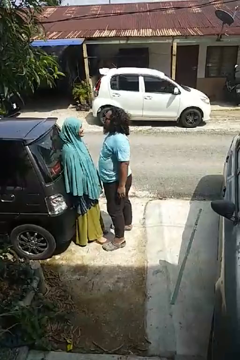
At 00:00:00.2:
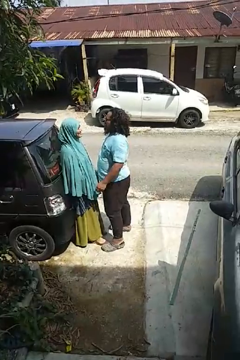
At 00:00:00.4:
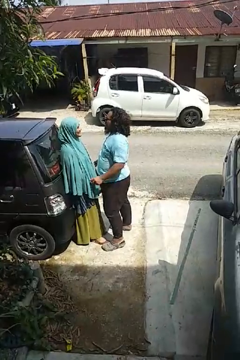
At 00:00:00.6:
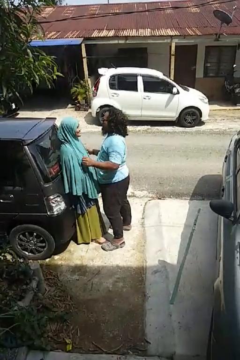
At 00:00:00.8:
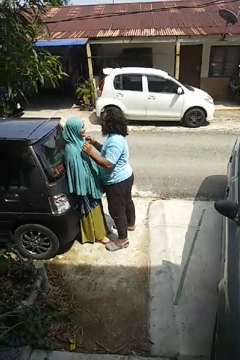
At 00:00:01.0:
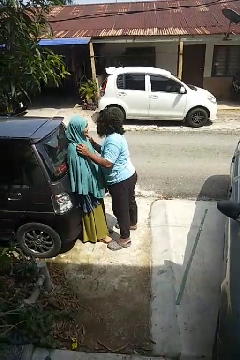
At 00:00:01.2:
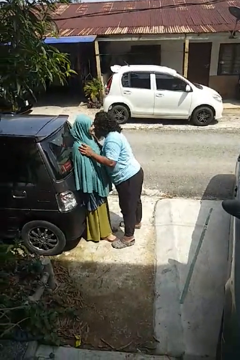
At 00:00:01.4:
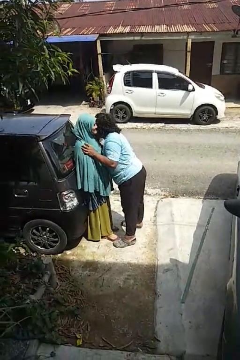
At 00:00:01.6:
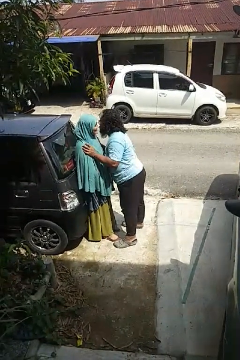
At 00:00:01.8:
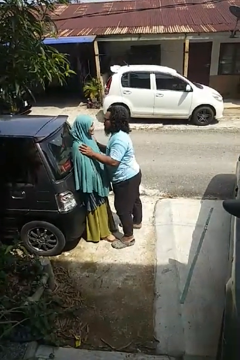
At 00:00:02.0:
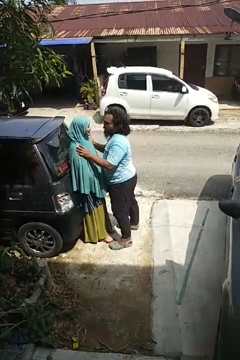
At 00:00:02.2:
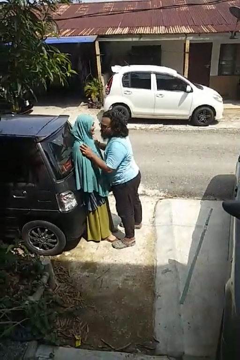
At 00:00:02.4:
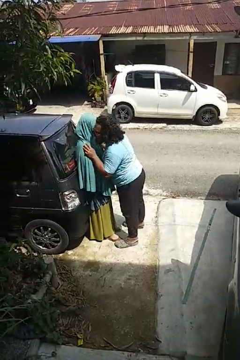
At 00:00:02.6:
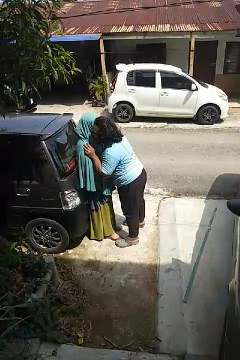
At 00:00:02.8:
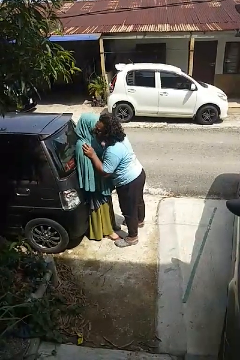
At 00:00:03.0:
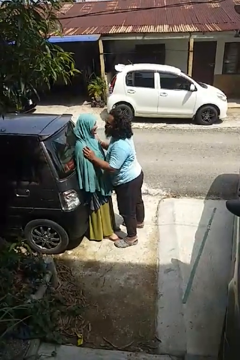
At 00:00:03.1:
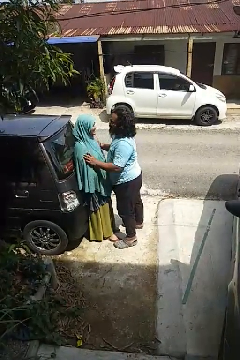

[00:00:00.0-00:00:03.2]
person kisses cheek of person

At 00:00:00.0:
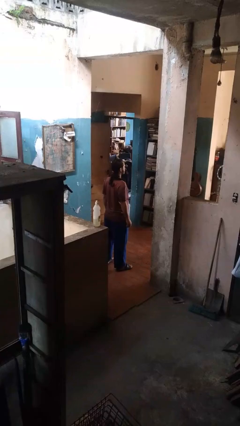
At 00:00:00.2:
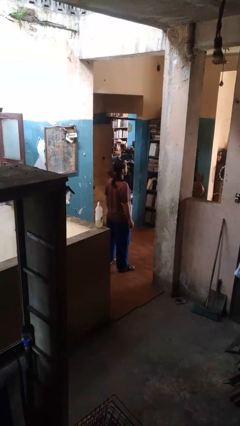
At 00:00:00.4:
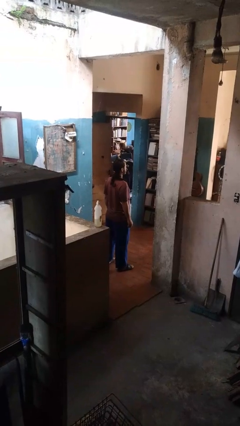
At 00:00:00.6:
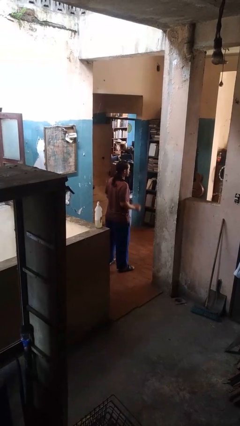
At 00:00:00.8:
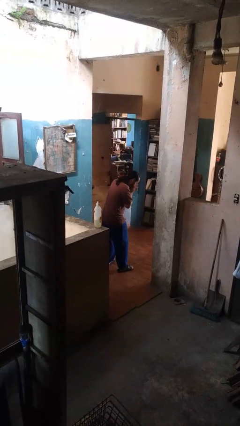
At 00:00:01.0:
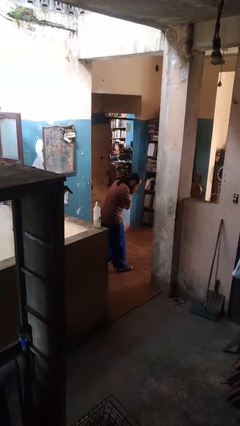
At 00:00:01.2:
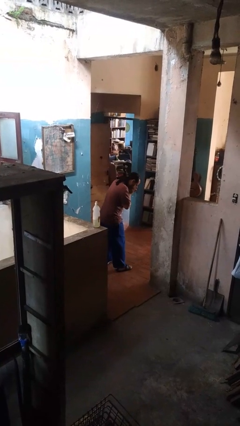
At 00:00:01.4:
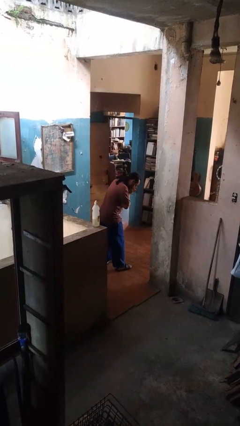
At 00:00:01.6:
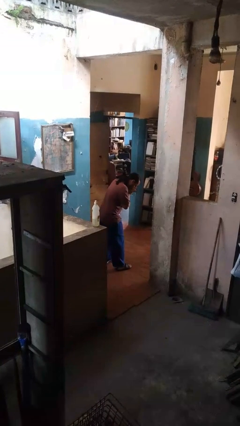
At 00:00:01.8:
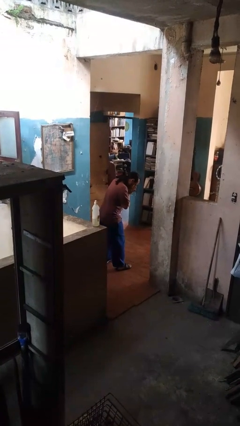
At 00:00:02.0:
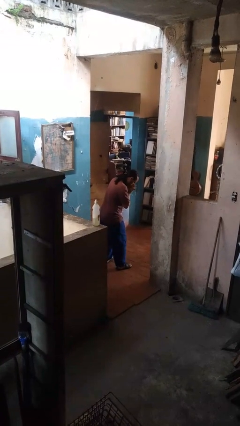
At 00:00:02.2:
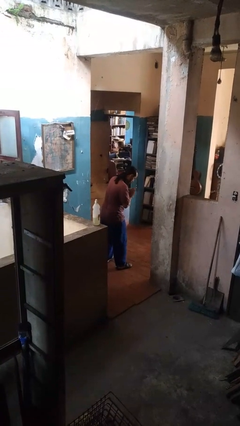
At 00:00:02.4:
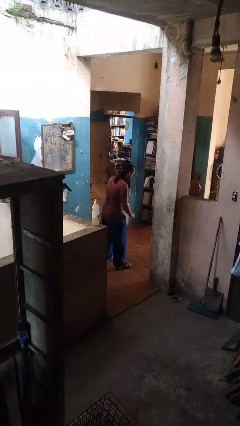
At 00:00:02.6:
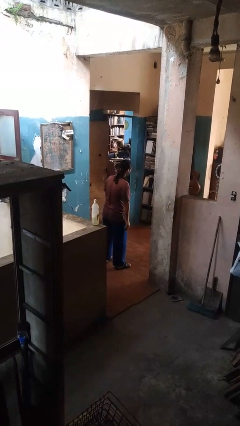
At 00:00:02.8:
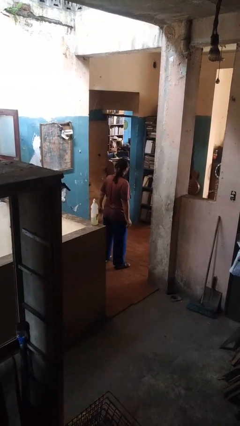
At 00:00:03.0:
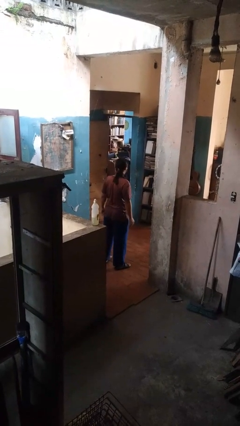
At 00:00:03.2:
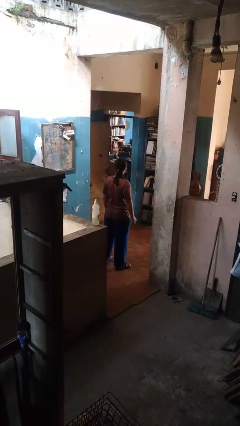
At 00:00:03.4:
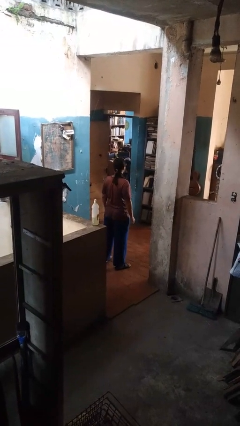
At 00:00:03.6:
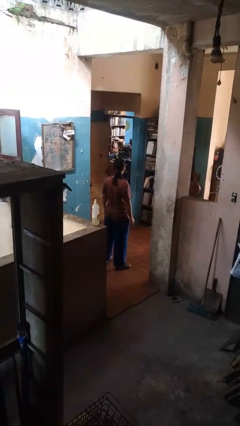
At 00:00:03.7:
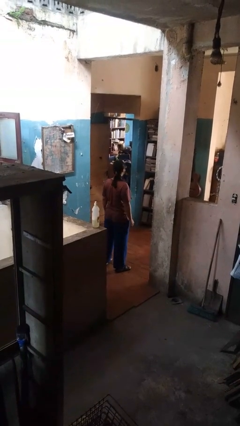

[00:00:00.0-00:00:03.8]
person sneezes into hand

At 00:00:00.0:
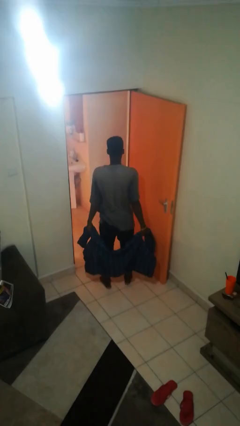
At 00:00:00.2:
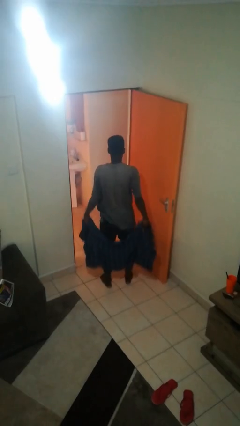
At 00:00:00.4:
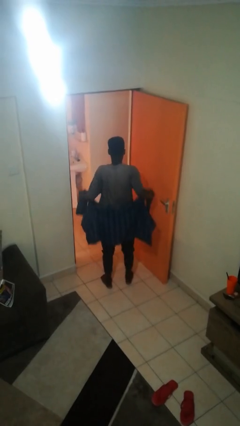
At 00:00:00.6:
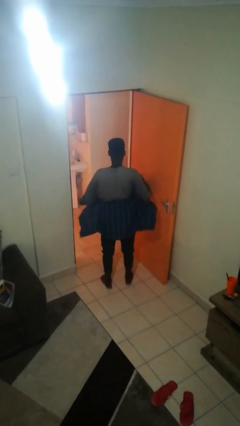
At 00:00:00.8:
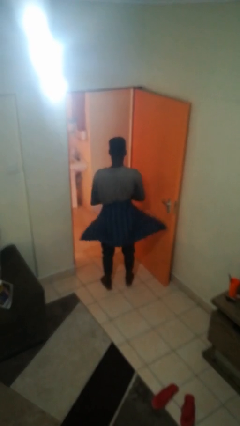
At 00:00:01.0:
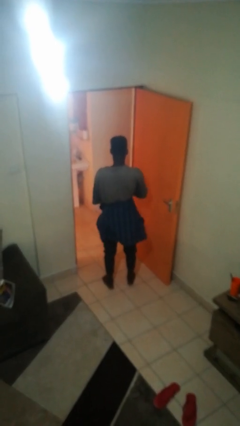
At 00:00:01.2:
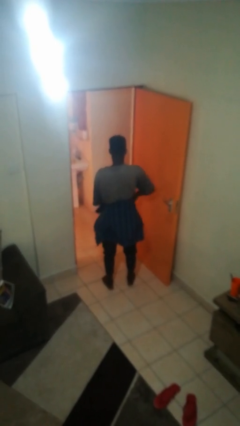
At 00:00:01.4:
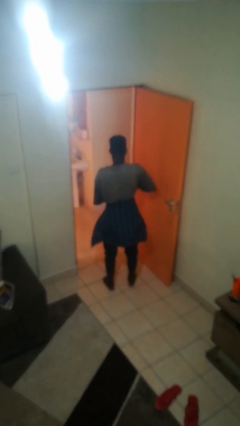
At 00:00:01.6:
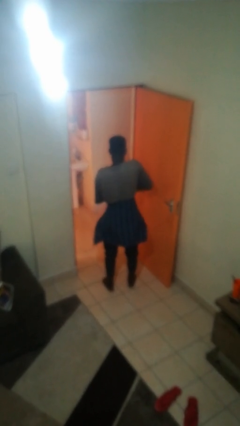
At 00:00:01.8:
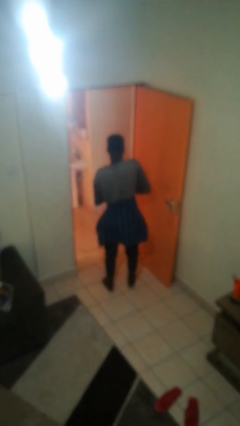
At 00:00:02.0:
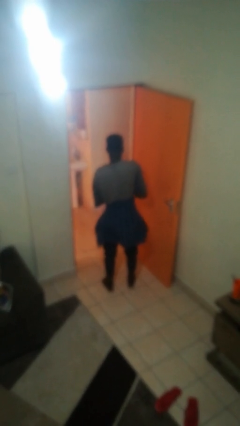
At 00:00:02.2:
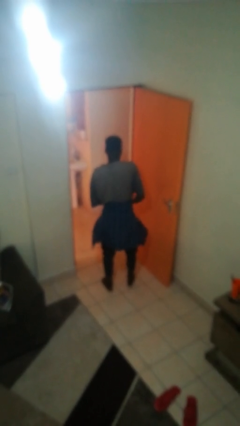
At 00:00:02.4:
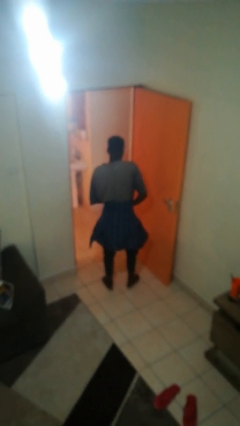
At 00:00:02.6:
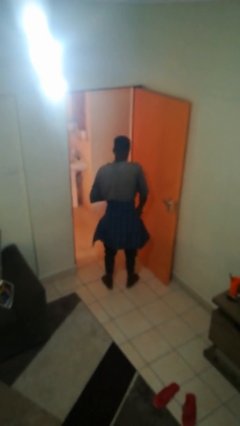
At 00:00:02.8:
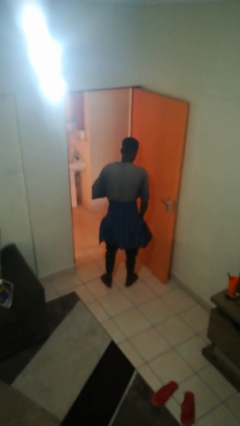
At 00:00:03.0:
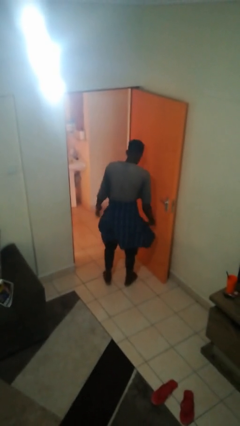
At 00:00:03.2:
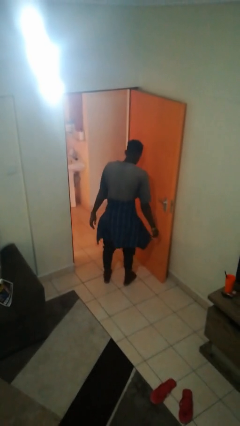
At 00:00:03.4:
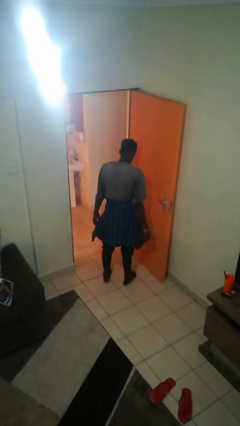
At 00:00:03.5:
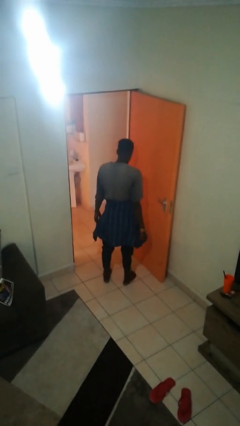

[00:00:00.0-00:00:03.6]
person ties jacket around waist

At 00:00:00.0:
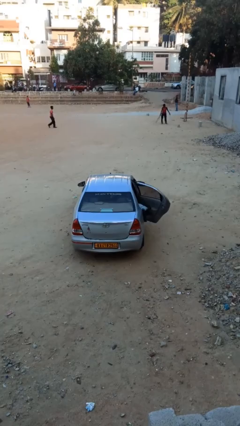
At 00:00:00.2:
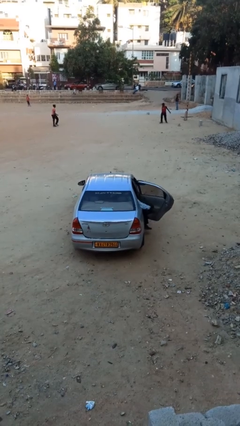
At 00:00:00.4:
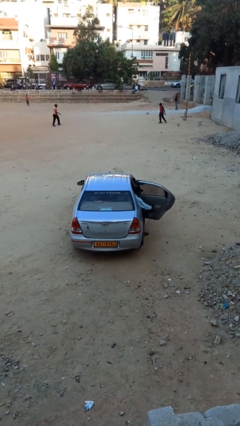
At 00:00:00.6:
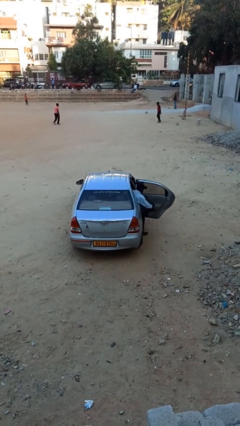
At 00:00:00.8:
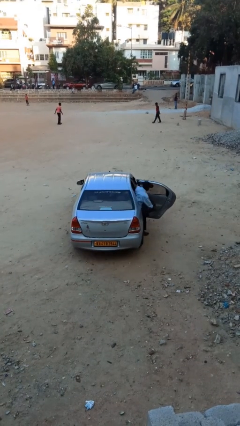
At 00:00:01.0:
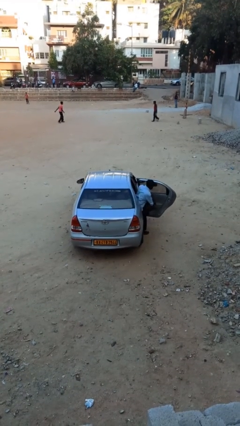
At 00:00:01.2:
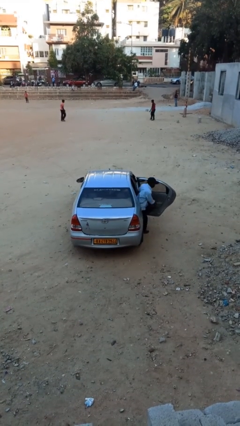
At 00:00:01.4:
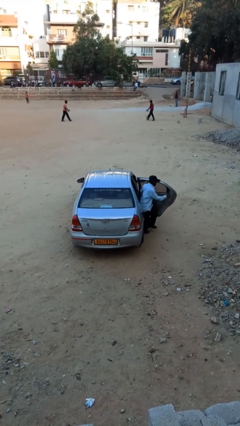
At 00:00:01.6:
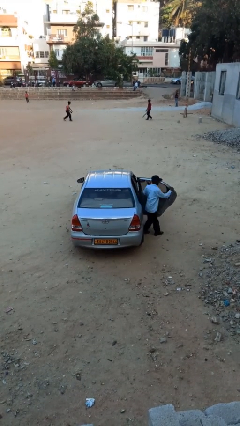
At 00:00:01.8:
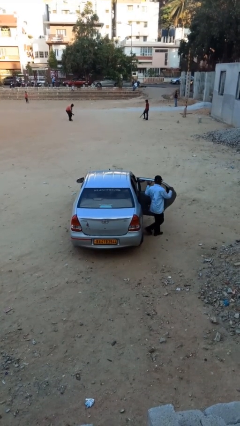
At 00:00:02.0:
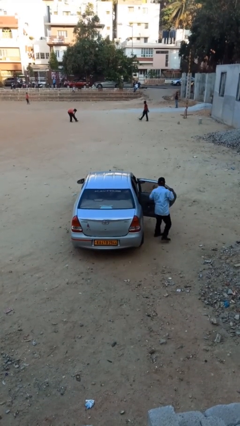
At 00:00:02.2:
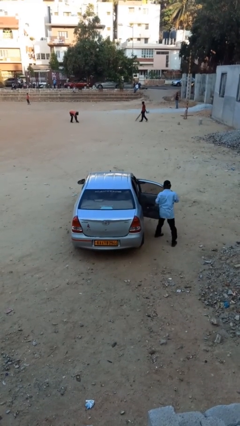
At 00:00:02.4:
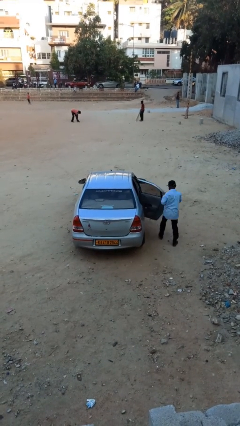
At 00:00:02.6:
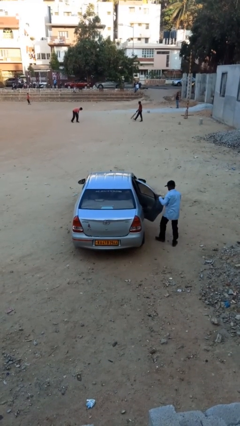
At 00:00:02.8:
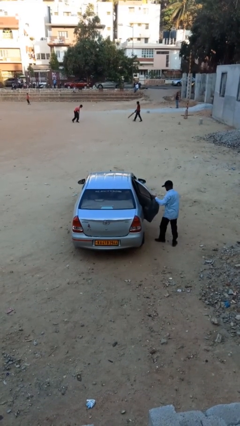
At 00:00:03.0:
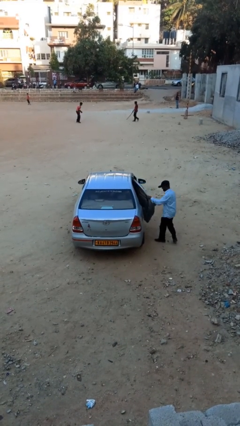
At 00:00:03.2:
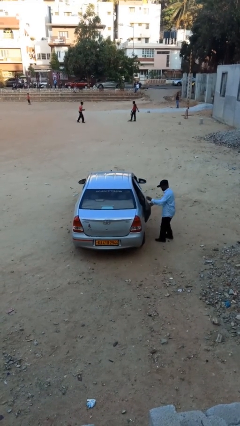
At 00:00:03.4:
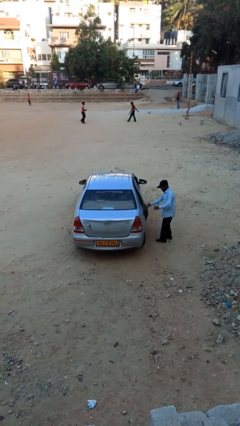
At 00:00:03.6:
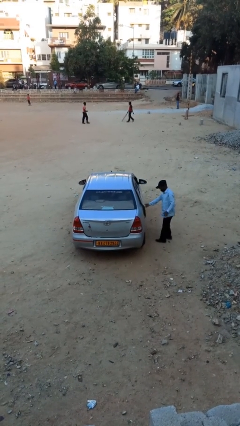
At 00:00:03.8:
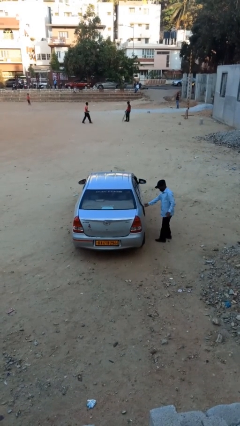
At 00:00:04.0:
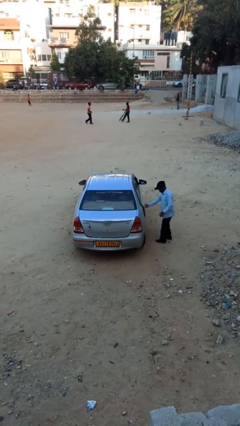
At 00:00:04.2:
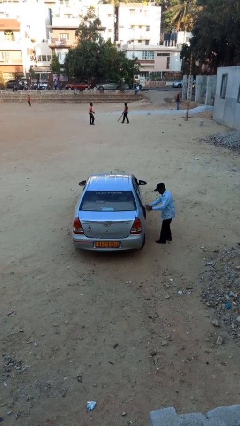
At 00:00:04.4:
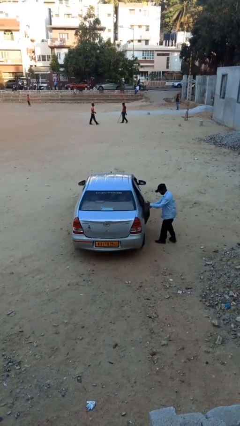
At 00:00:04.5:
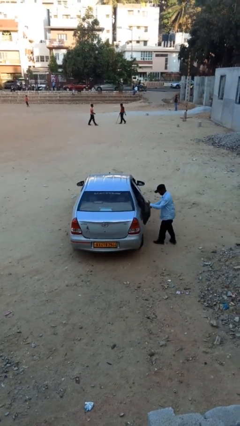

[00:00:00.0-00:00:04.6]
car drops off person

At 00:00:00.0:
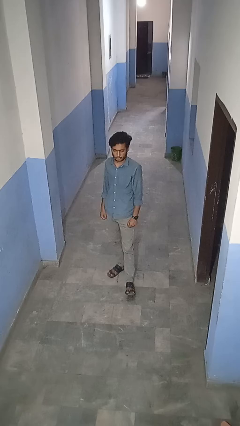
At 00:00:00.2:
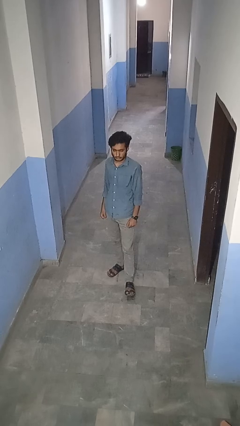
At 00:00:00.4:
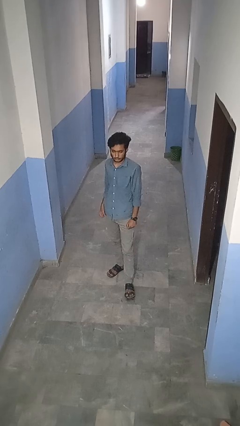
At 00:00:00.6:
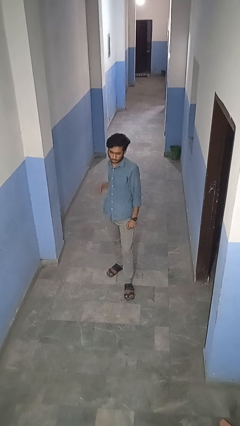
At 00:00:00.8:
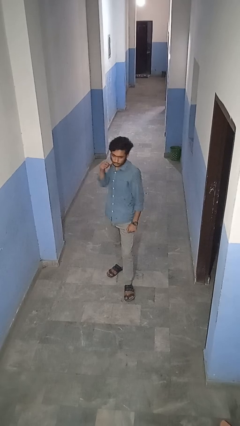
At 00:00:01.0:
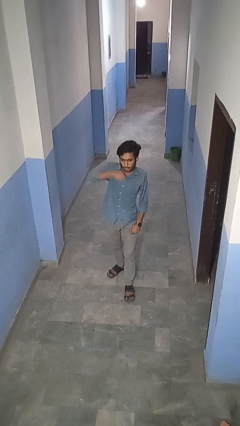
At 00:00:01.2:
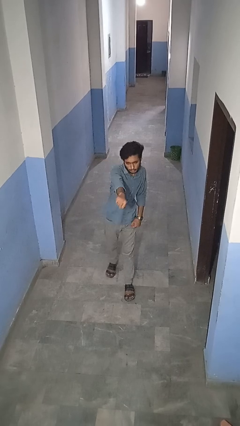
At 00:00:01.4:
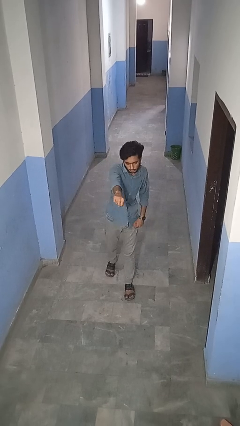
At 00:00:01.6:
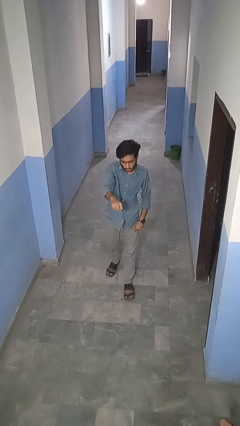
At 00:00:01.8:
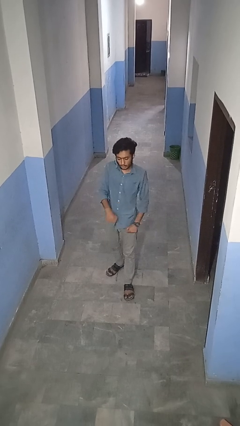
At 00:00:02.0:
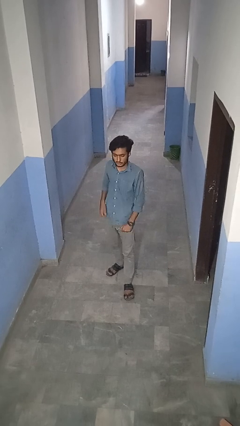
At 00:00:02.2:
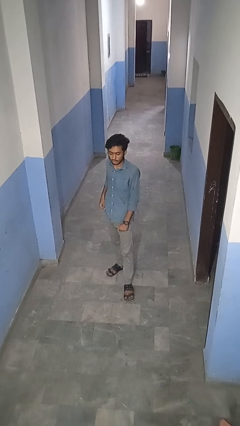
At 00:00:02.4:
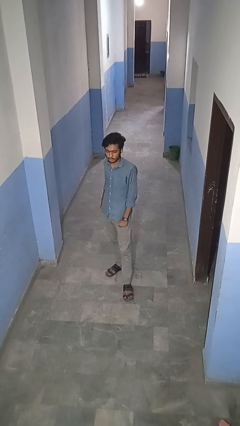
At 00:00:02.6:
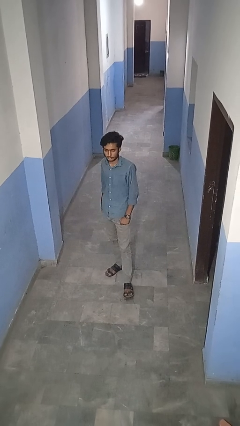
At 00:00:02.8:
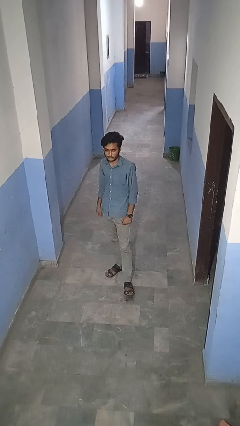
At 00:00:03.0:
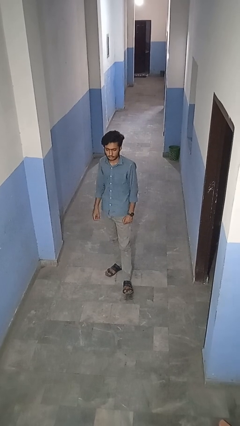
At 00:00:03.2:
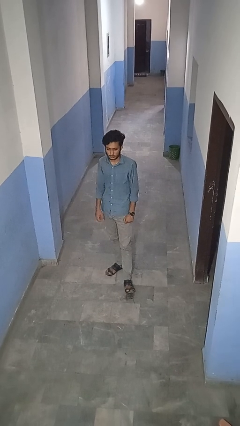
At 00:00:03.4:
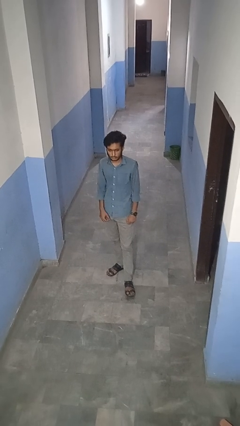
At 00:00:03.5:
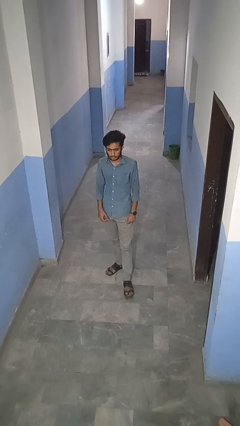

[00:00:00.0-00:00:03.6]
person punches
